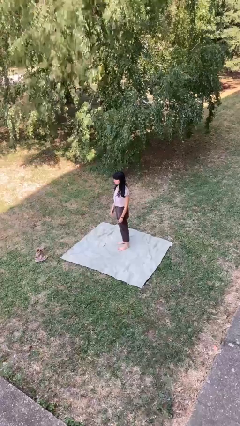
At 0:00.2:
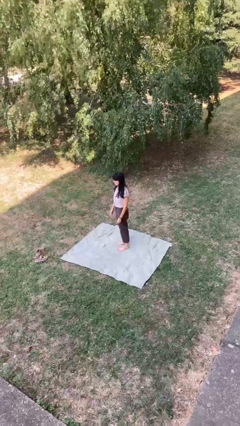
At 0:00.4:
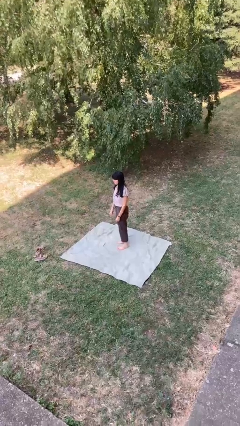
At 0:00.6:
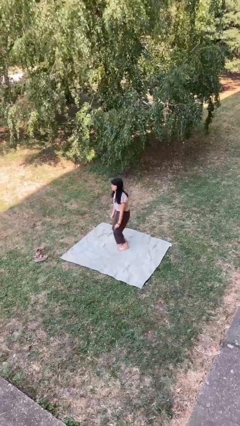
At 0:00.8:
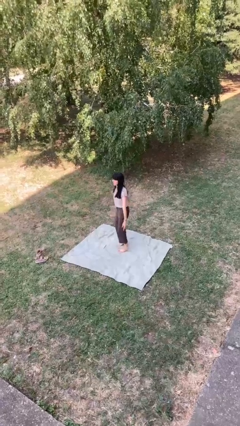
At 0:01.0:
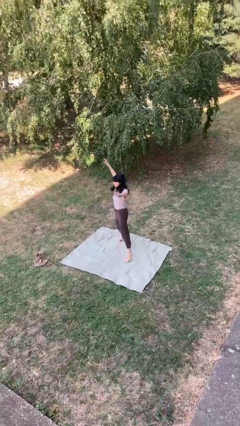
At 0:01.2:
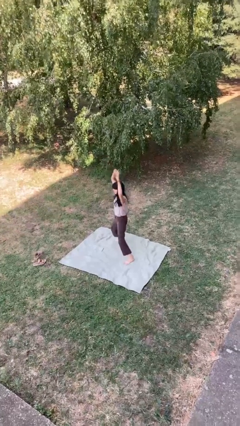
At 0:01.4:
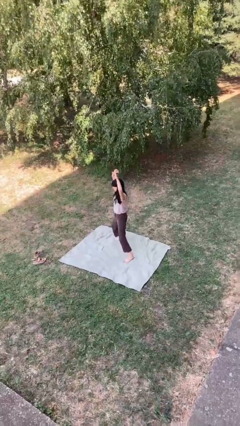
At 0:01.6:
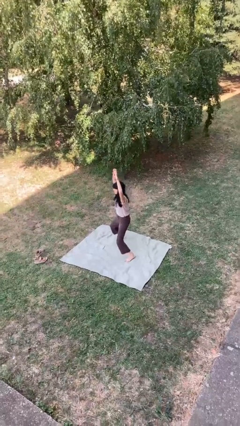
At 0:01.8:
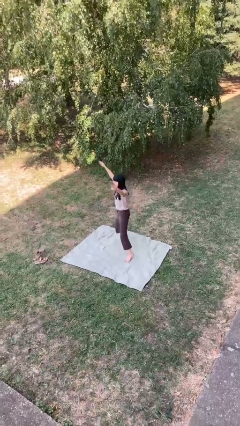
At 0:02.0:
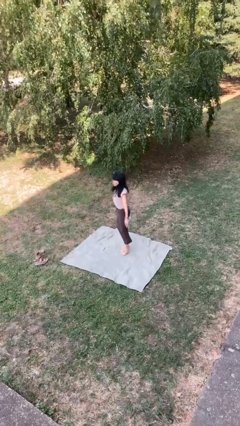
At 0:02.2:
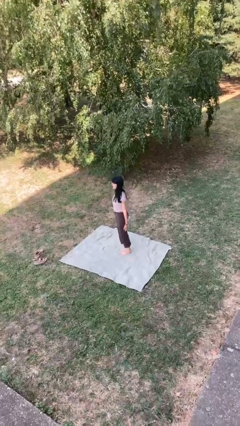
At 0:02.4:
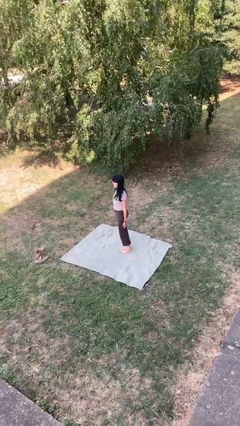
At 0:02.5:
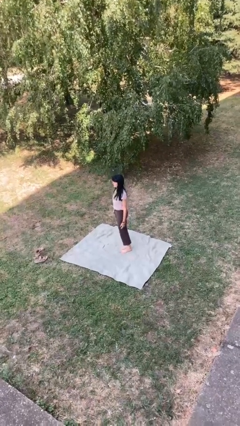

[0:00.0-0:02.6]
person exercises with jumping jacks

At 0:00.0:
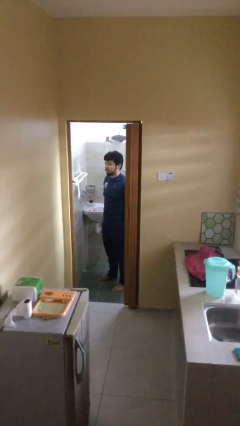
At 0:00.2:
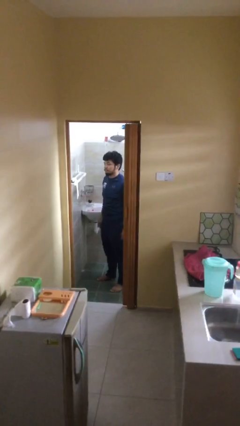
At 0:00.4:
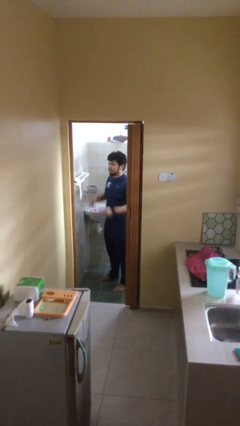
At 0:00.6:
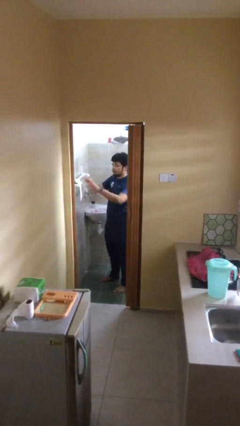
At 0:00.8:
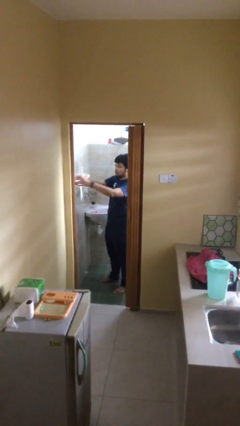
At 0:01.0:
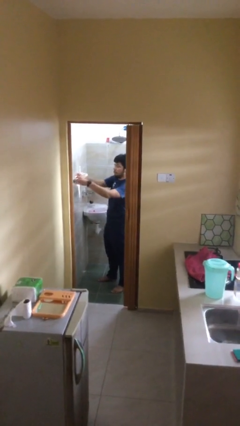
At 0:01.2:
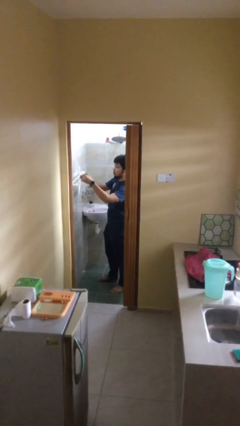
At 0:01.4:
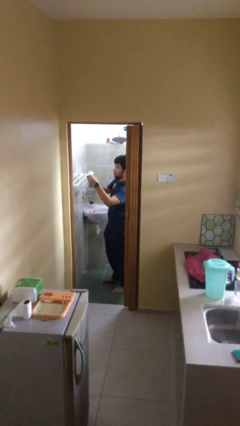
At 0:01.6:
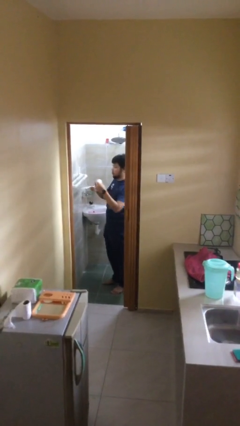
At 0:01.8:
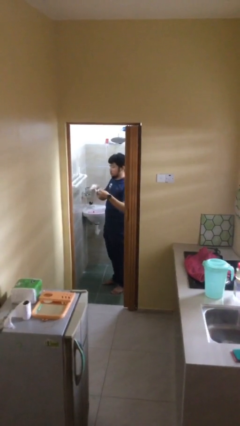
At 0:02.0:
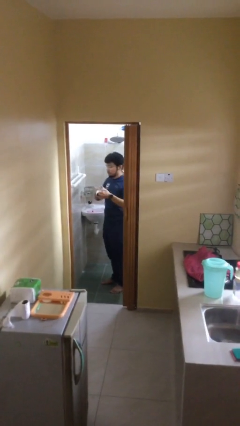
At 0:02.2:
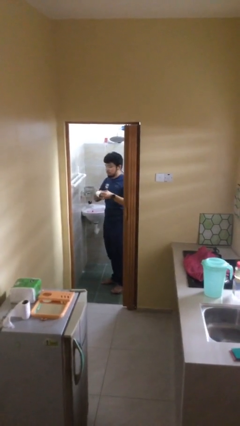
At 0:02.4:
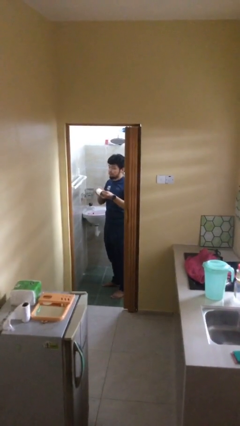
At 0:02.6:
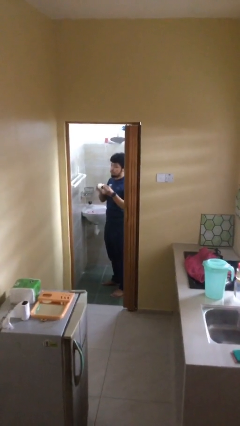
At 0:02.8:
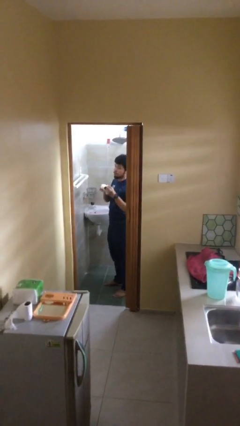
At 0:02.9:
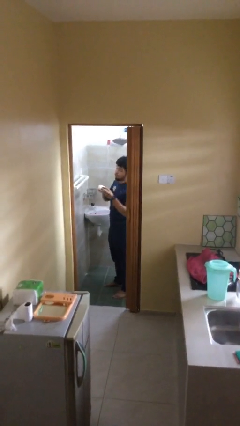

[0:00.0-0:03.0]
person picks up object from countertop

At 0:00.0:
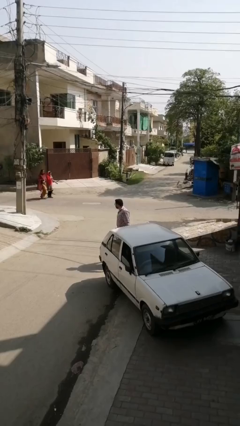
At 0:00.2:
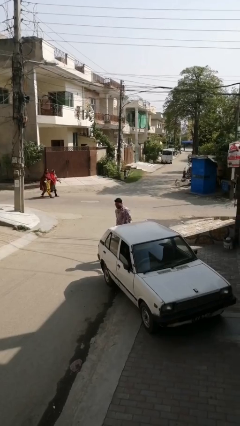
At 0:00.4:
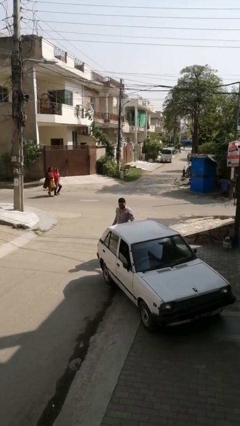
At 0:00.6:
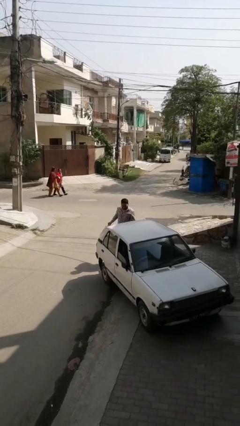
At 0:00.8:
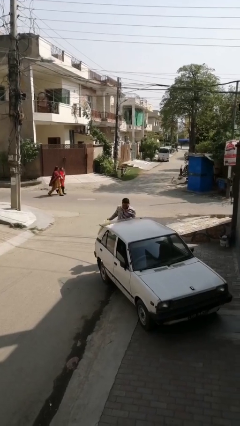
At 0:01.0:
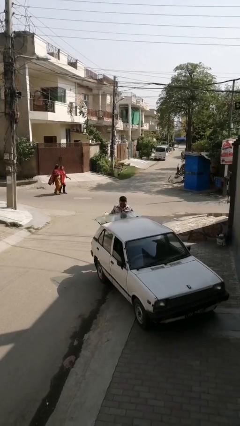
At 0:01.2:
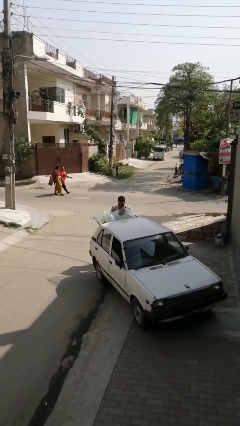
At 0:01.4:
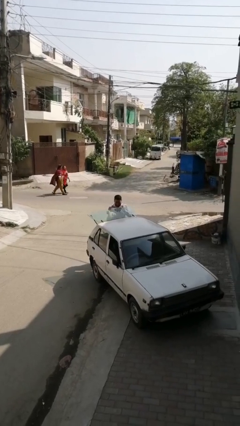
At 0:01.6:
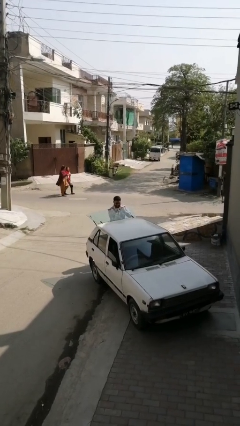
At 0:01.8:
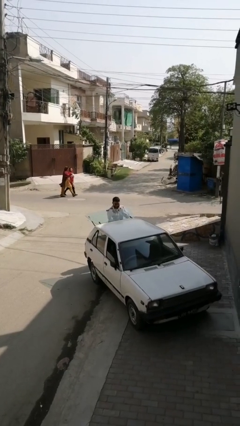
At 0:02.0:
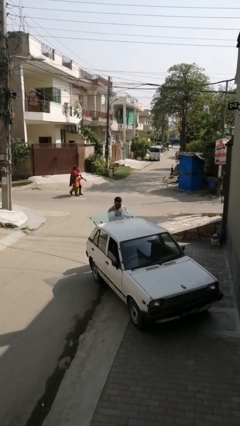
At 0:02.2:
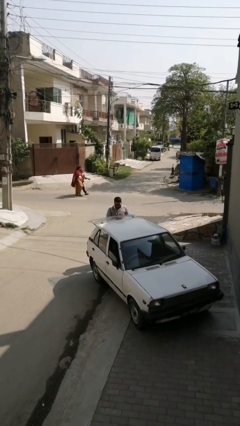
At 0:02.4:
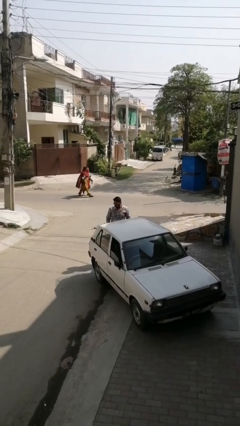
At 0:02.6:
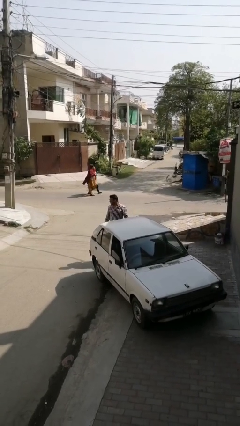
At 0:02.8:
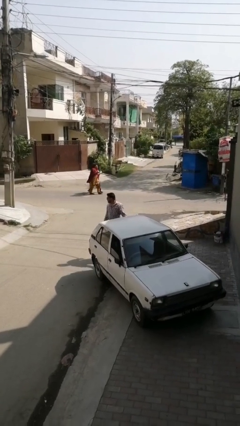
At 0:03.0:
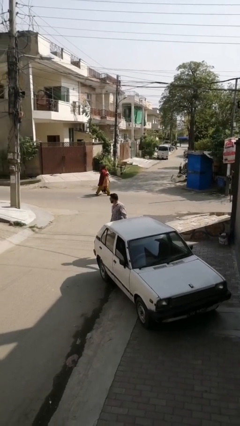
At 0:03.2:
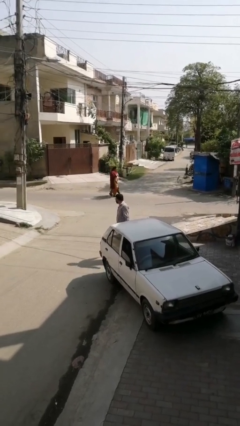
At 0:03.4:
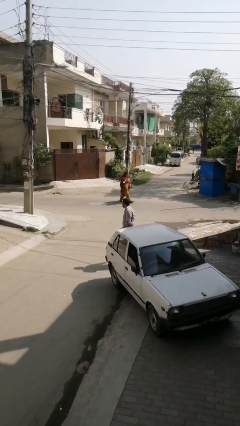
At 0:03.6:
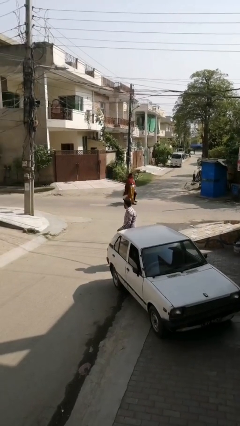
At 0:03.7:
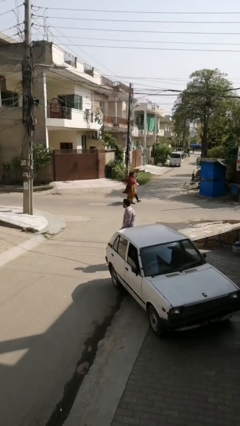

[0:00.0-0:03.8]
person loads car

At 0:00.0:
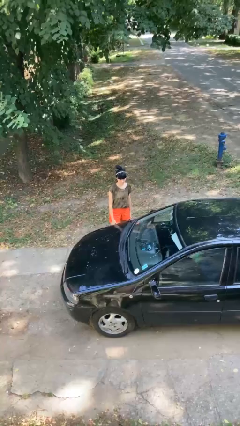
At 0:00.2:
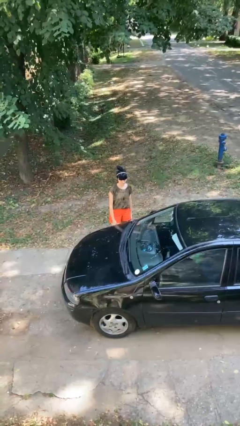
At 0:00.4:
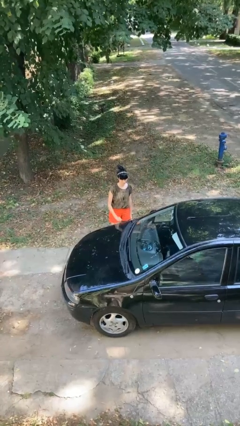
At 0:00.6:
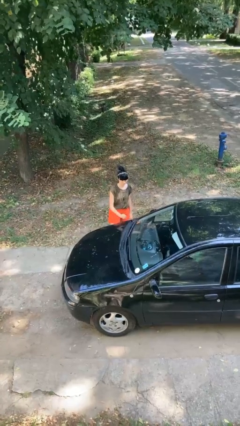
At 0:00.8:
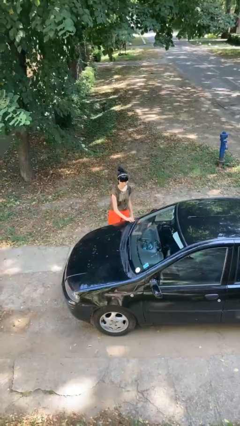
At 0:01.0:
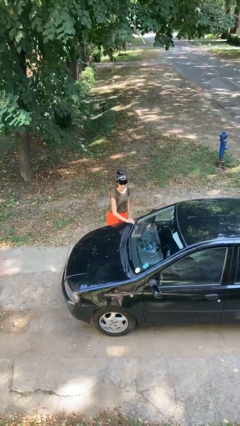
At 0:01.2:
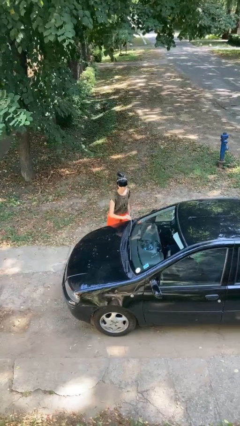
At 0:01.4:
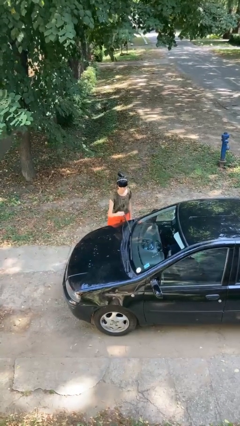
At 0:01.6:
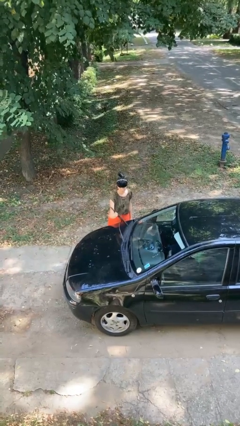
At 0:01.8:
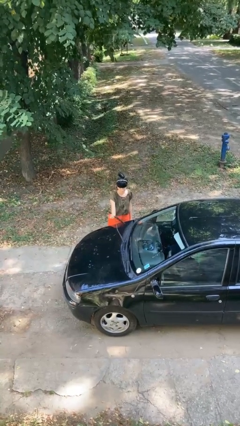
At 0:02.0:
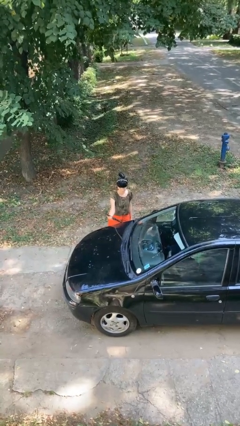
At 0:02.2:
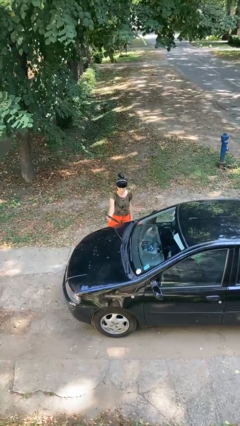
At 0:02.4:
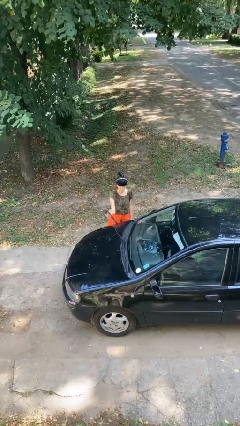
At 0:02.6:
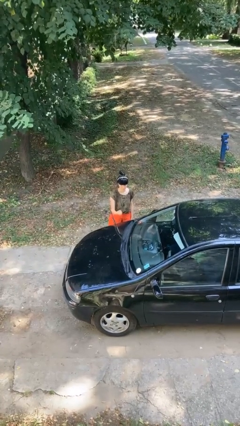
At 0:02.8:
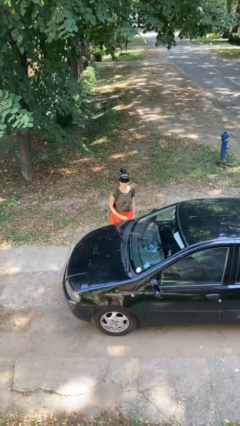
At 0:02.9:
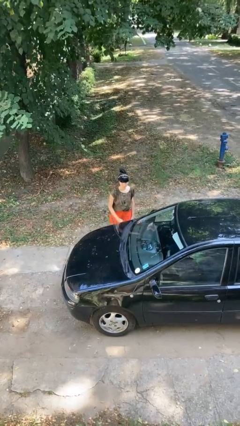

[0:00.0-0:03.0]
person flips up car wipers

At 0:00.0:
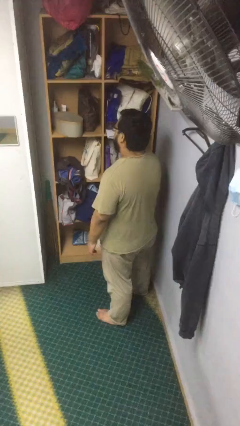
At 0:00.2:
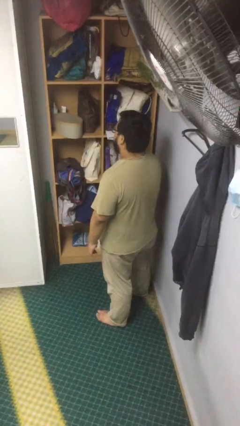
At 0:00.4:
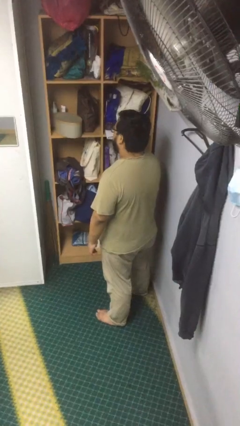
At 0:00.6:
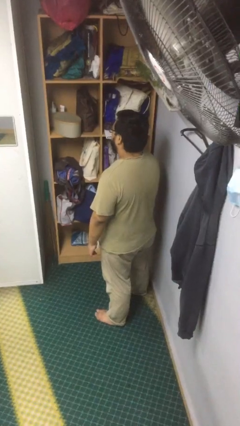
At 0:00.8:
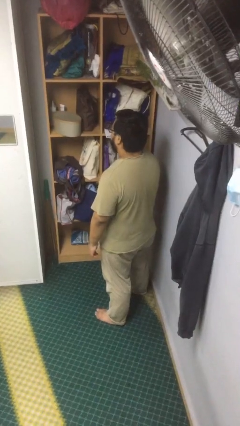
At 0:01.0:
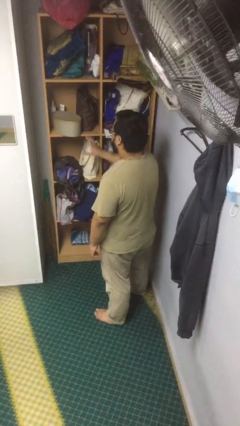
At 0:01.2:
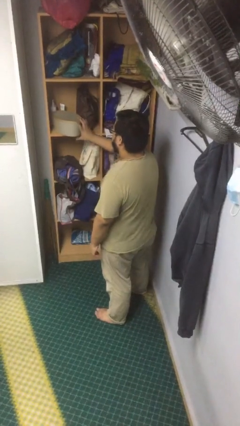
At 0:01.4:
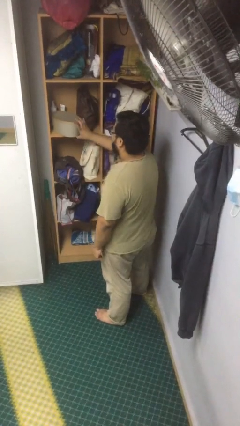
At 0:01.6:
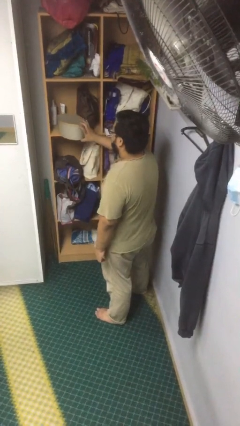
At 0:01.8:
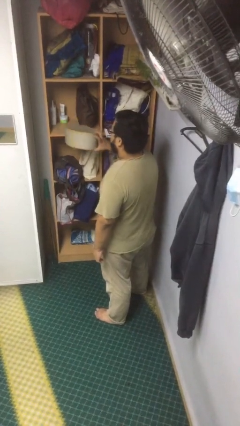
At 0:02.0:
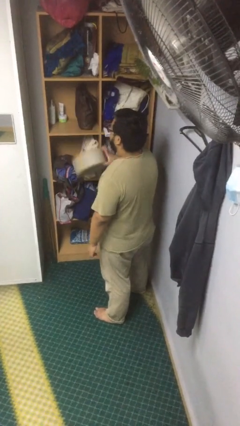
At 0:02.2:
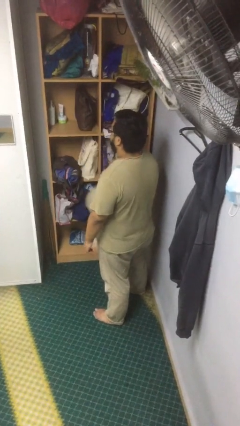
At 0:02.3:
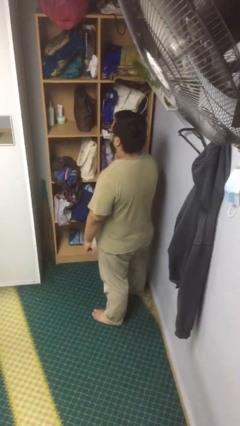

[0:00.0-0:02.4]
person picks up object from cabinet

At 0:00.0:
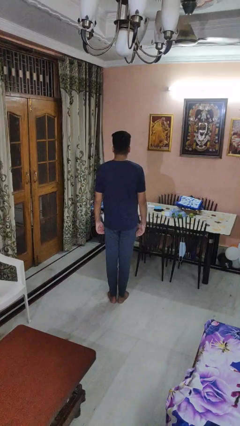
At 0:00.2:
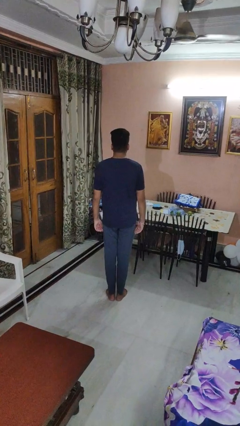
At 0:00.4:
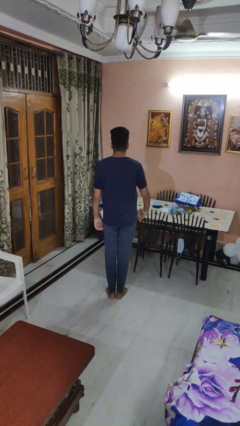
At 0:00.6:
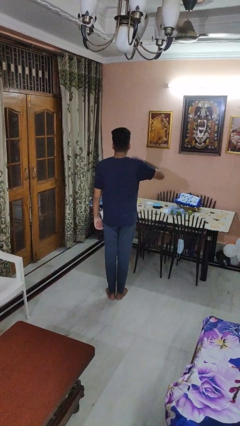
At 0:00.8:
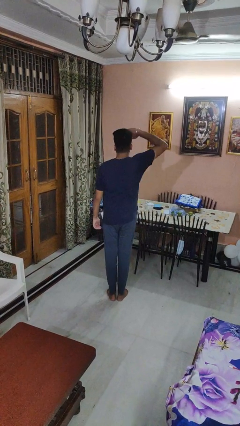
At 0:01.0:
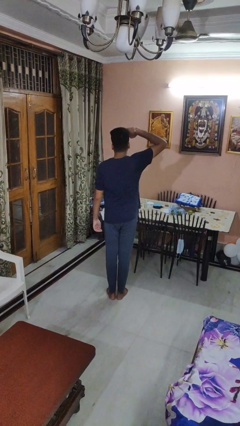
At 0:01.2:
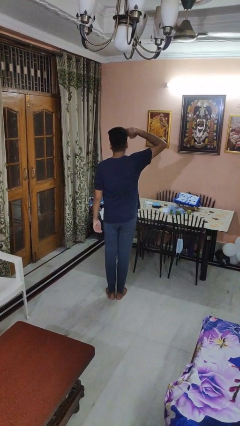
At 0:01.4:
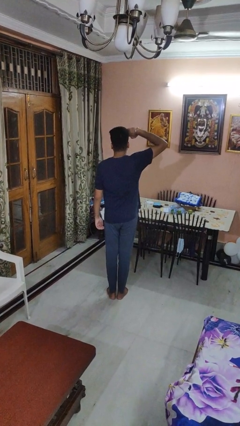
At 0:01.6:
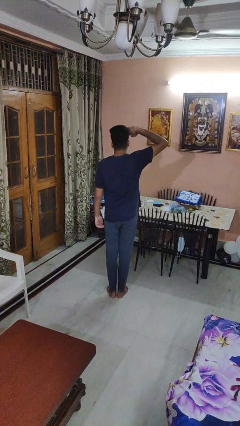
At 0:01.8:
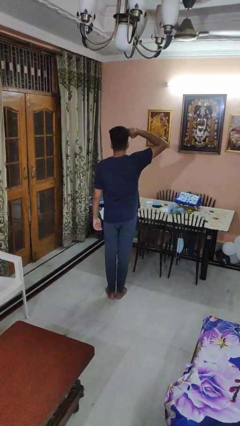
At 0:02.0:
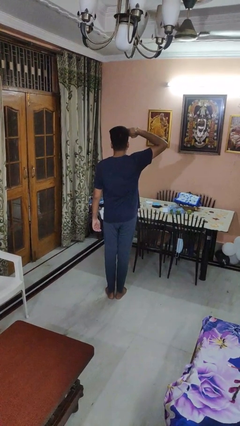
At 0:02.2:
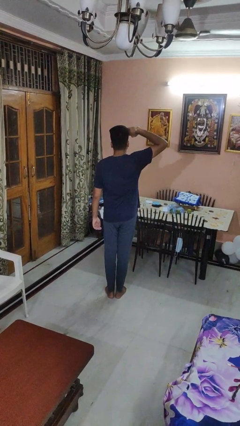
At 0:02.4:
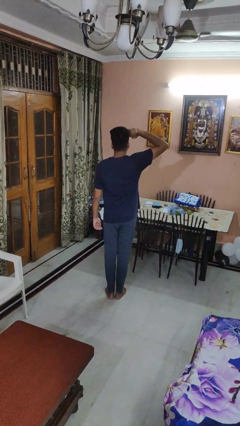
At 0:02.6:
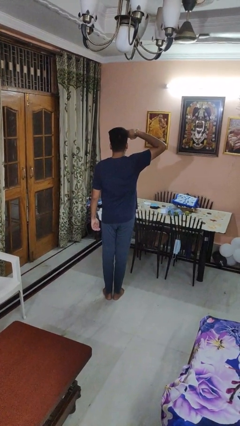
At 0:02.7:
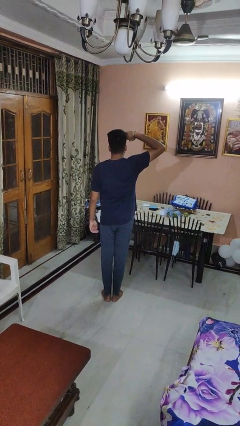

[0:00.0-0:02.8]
person salutes
